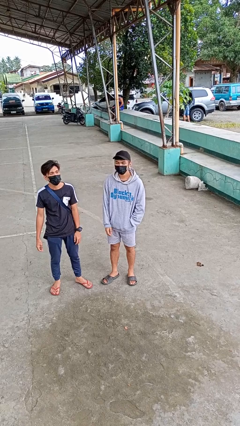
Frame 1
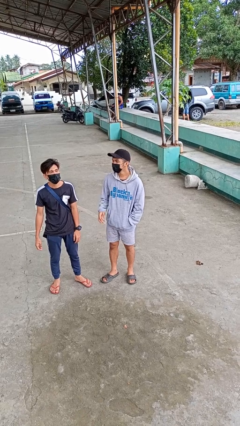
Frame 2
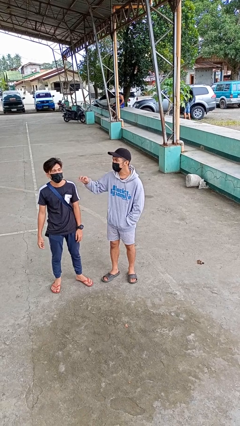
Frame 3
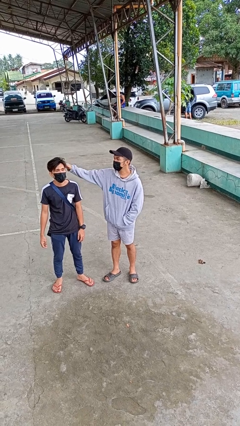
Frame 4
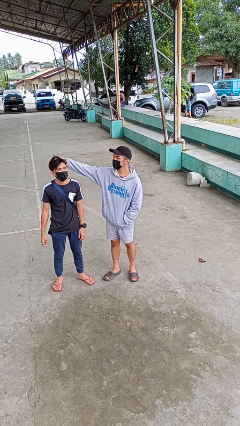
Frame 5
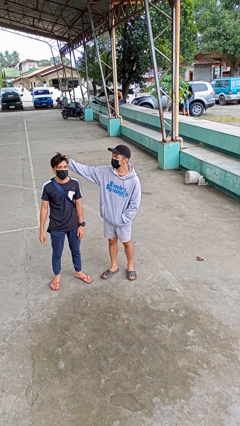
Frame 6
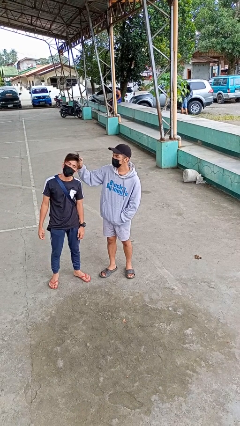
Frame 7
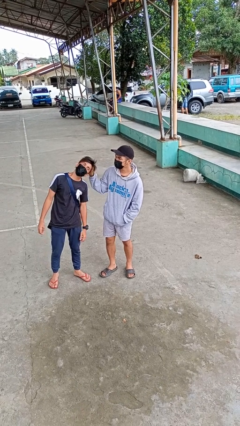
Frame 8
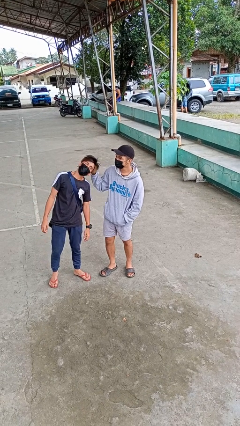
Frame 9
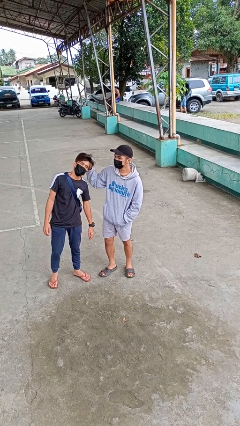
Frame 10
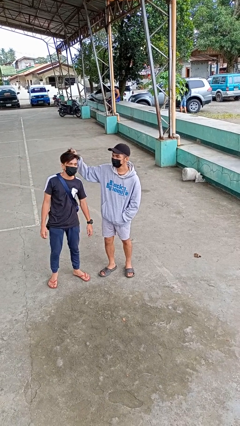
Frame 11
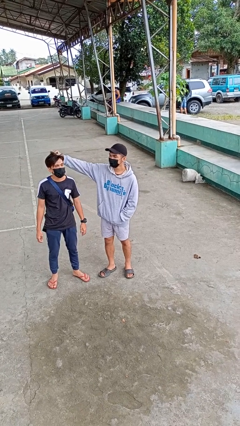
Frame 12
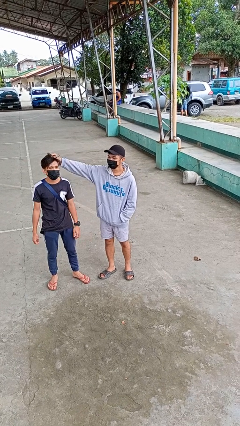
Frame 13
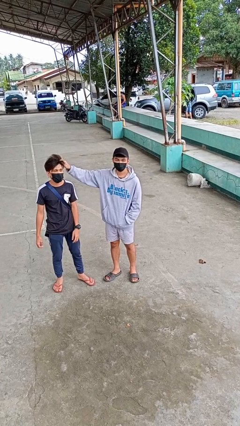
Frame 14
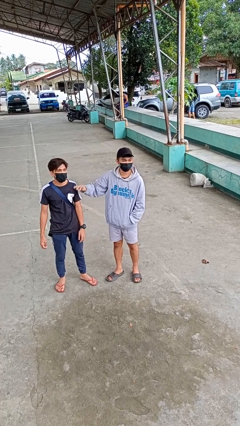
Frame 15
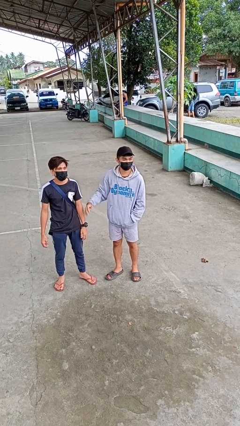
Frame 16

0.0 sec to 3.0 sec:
person grabs person by hair

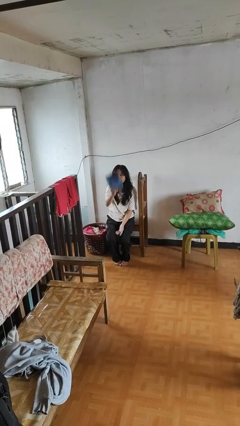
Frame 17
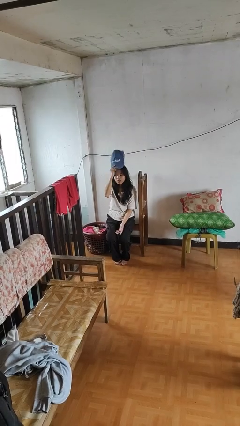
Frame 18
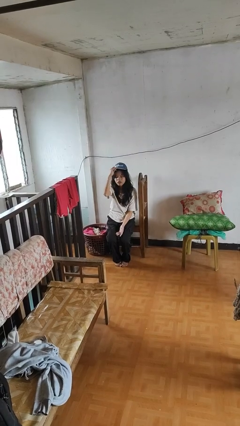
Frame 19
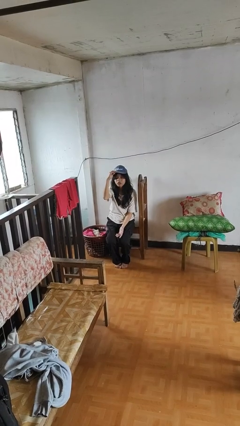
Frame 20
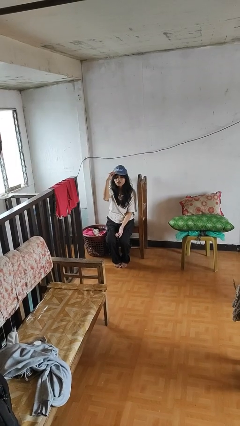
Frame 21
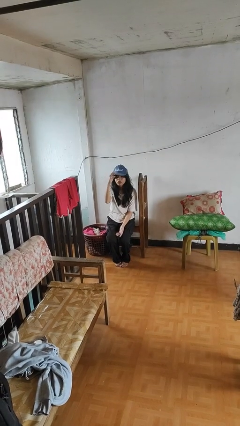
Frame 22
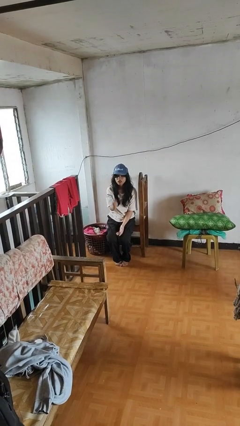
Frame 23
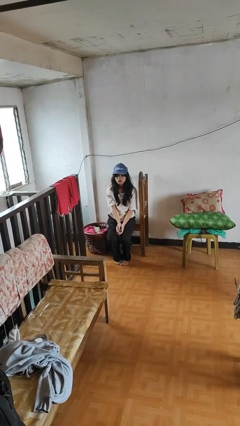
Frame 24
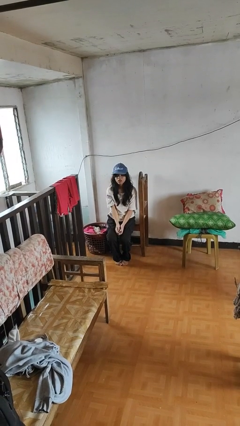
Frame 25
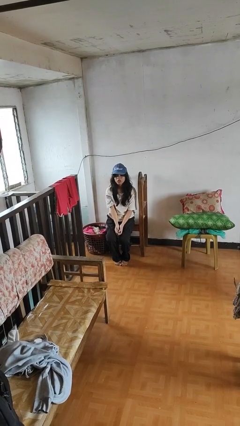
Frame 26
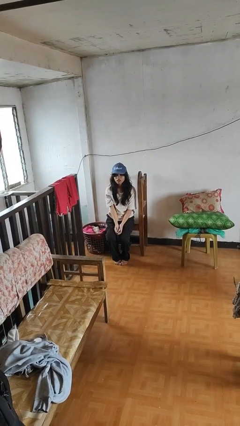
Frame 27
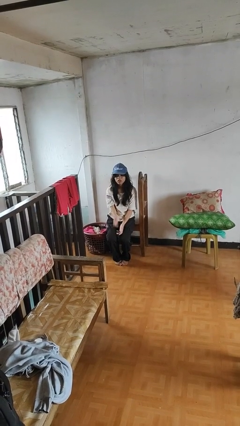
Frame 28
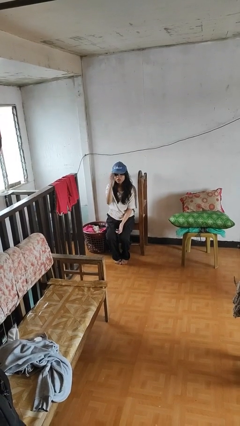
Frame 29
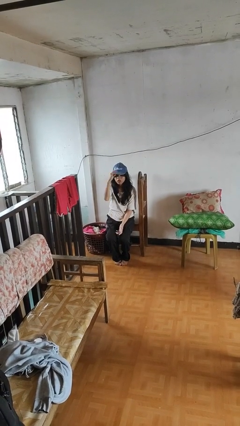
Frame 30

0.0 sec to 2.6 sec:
person puts on hat

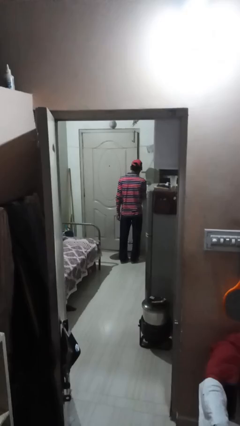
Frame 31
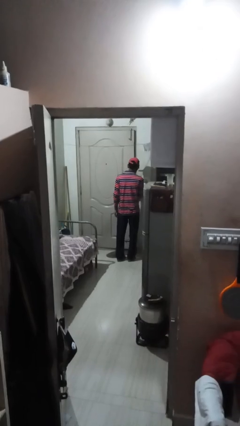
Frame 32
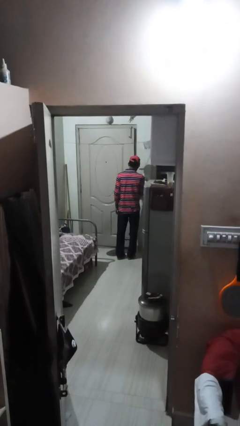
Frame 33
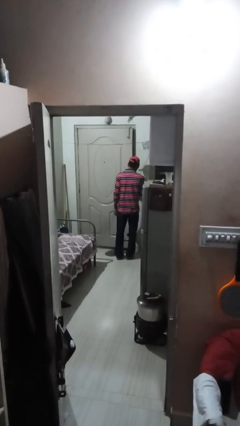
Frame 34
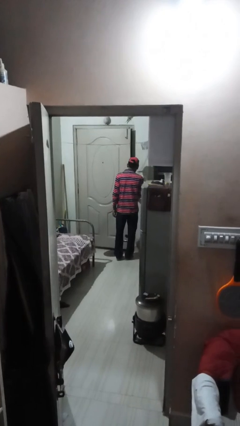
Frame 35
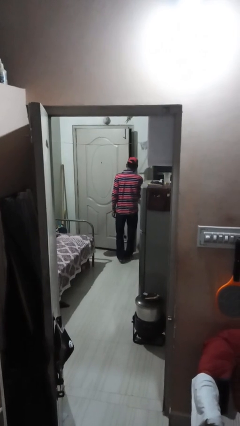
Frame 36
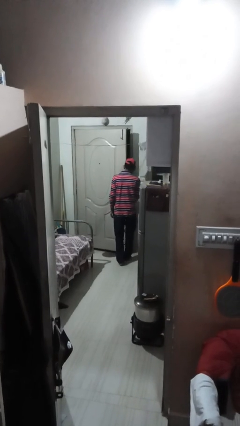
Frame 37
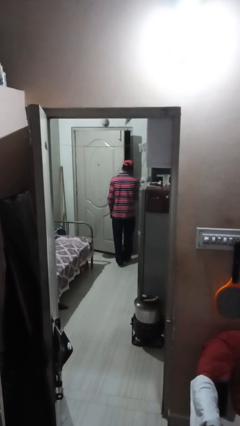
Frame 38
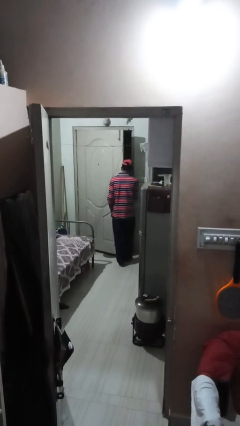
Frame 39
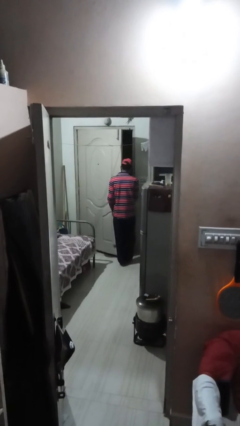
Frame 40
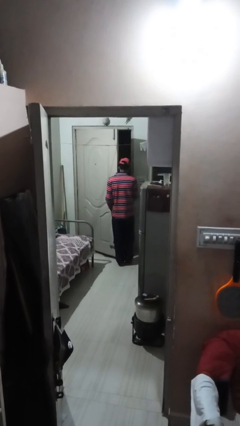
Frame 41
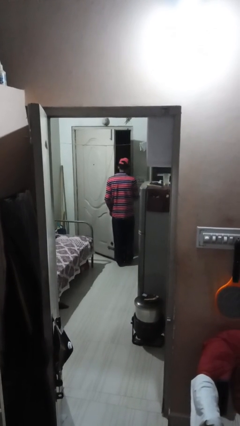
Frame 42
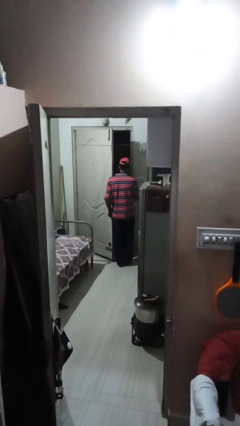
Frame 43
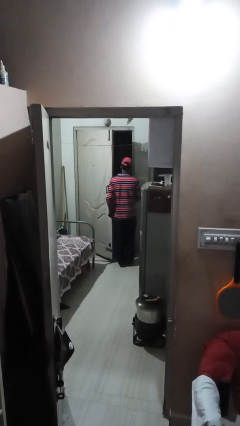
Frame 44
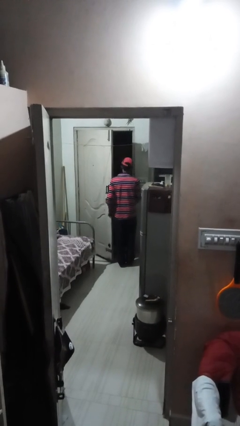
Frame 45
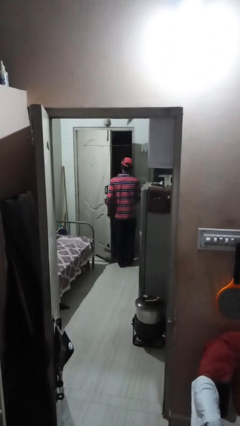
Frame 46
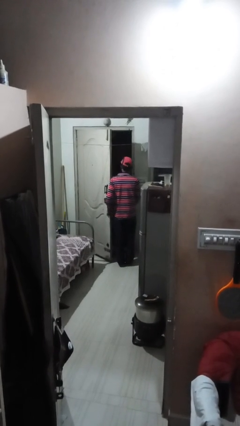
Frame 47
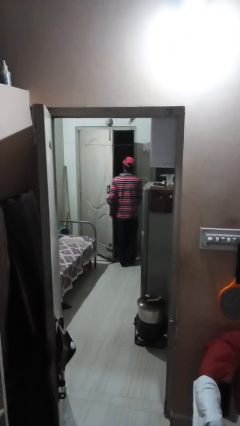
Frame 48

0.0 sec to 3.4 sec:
person opens facility door

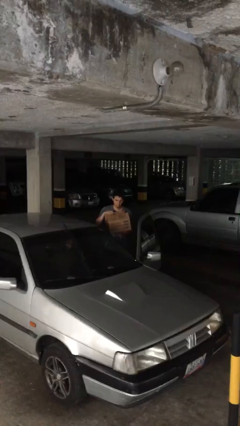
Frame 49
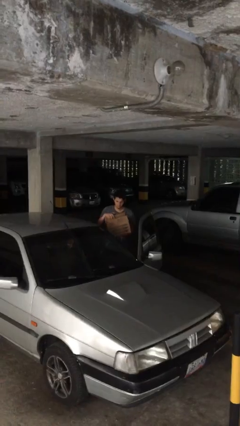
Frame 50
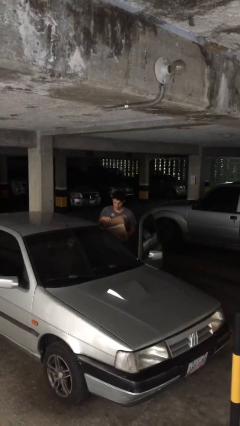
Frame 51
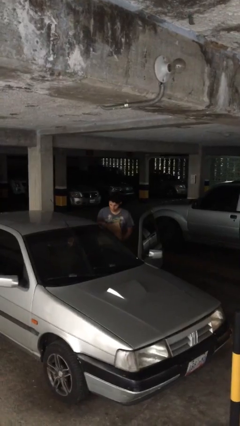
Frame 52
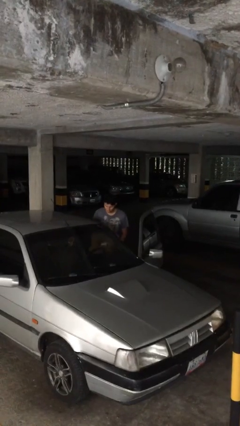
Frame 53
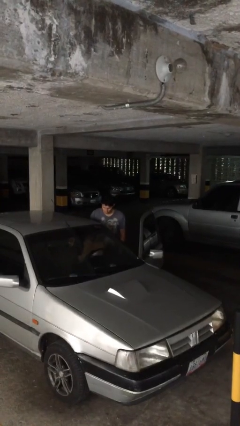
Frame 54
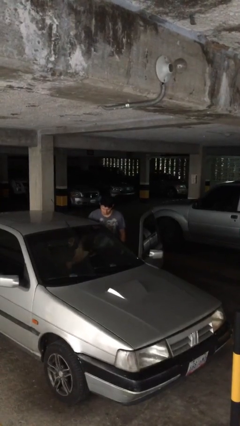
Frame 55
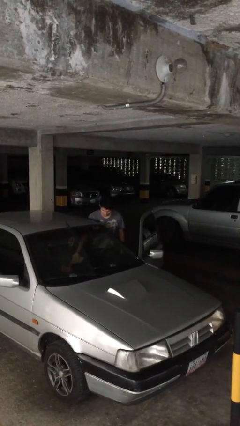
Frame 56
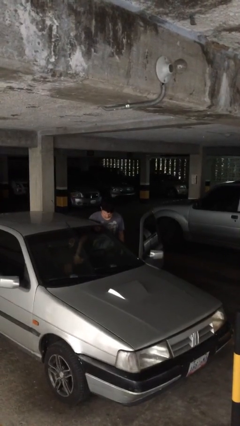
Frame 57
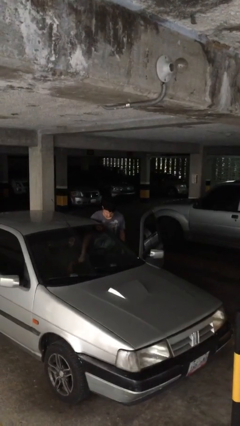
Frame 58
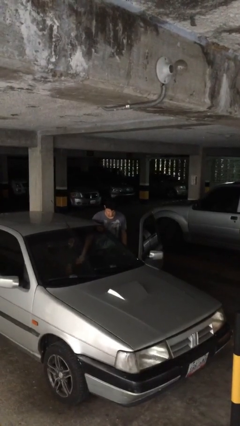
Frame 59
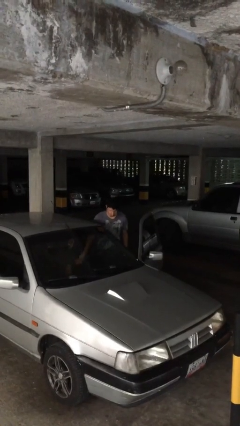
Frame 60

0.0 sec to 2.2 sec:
person loads car

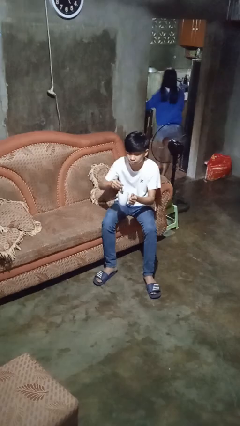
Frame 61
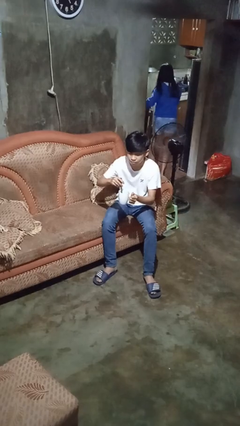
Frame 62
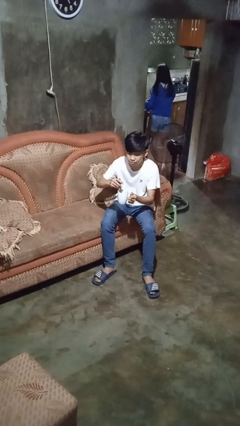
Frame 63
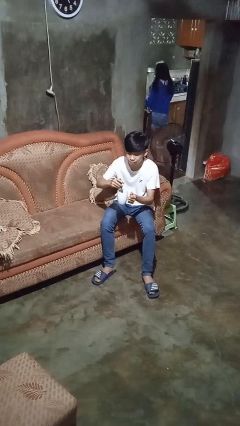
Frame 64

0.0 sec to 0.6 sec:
person stirs mug

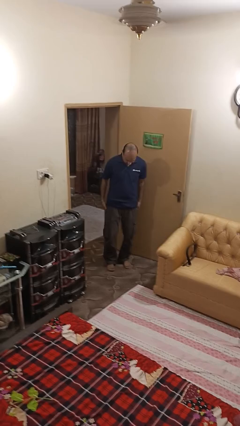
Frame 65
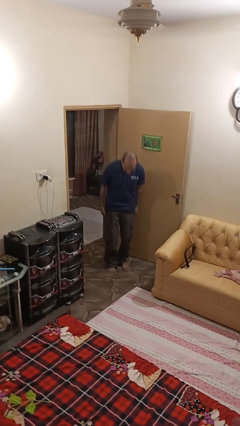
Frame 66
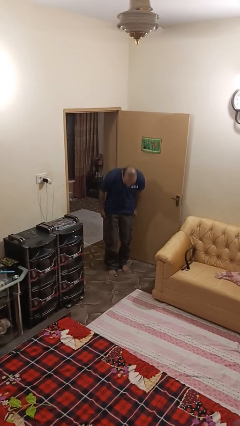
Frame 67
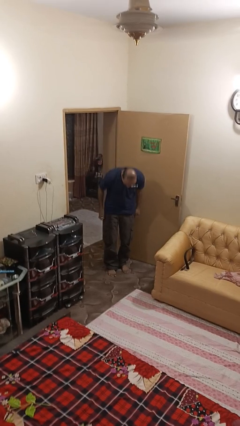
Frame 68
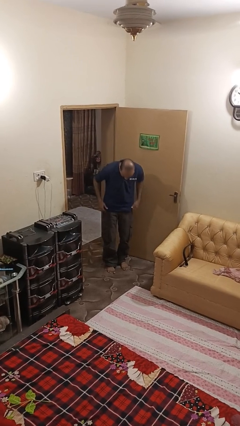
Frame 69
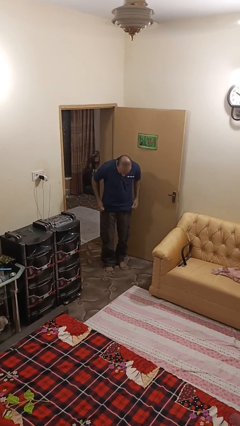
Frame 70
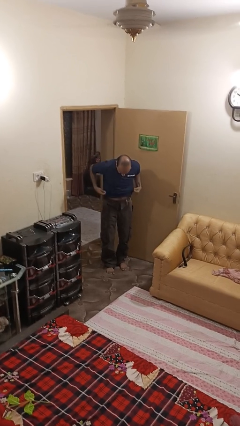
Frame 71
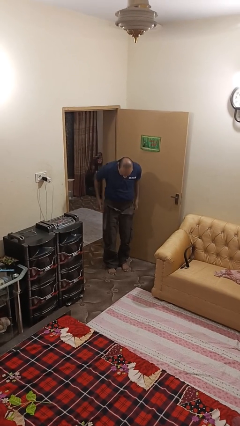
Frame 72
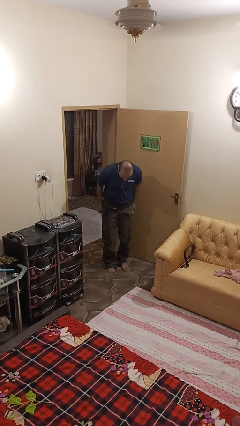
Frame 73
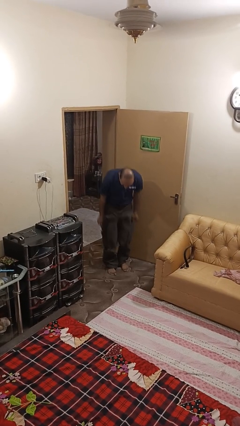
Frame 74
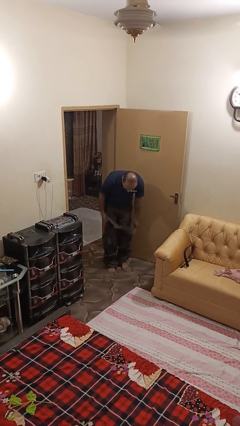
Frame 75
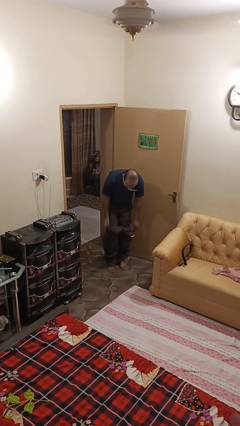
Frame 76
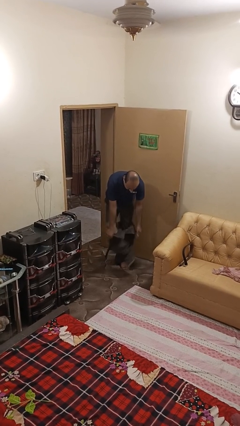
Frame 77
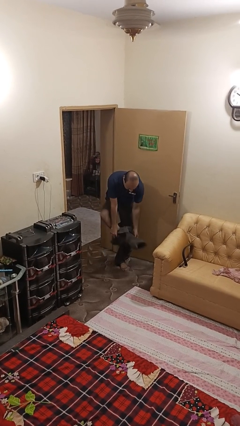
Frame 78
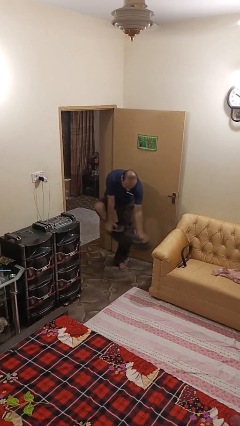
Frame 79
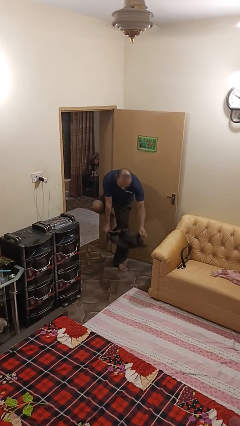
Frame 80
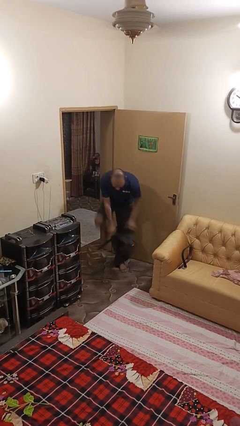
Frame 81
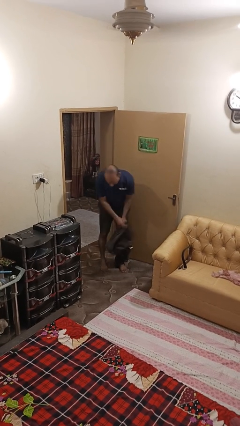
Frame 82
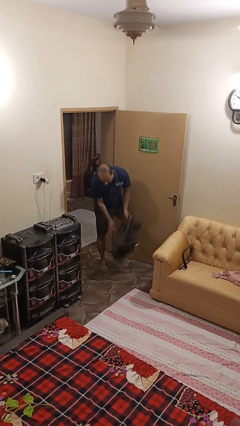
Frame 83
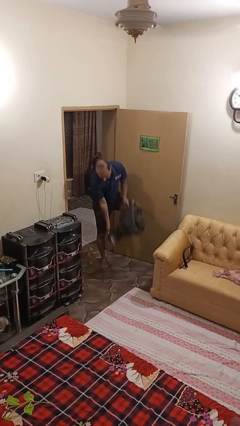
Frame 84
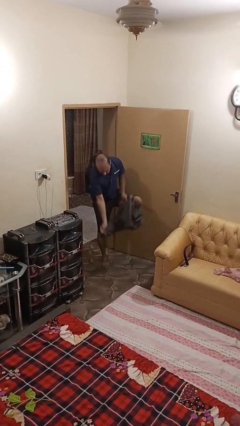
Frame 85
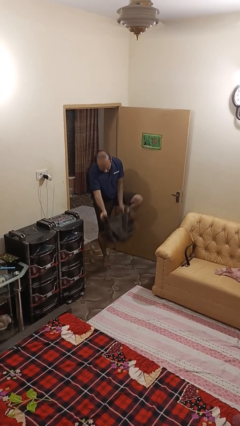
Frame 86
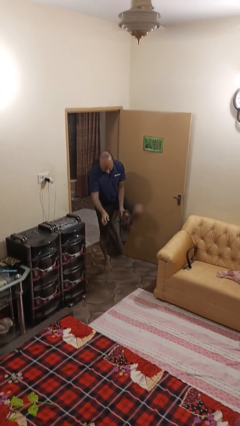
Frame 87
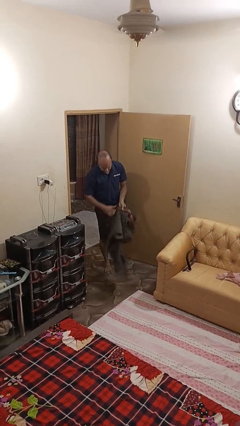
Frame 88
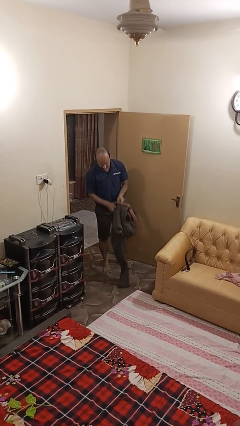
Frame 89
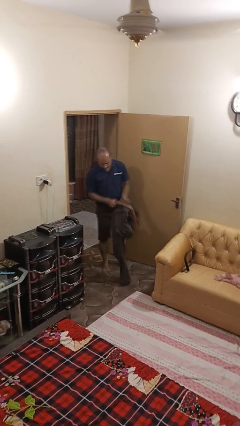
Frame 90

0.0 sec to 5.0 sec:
person takes off pants

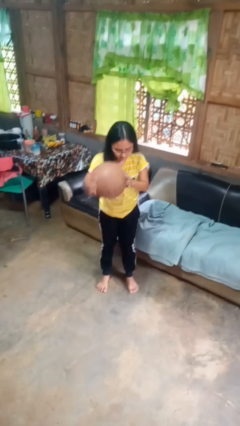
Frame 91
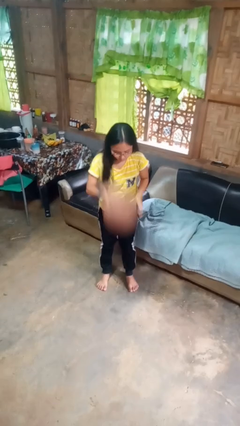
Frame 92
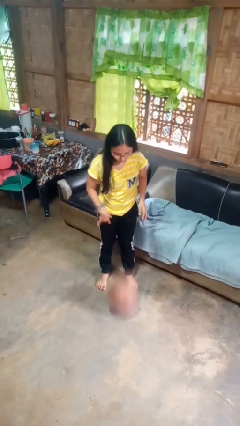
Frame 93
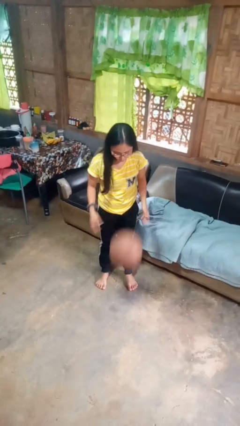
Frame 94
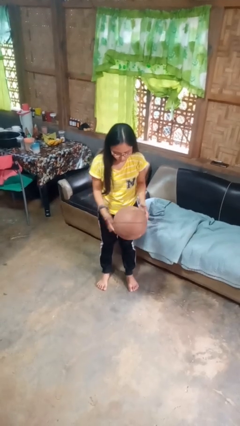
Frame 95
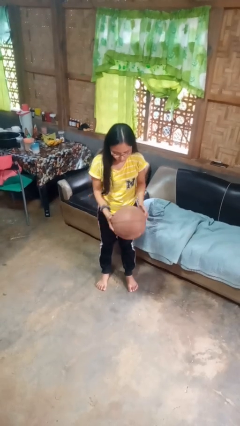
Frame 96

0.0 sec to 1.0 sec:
person bounces ball on floor
